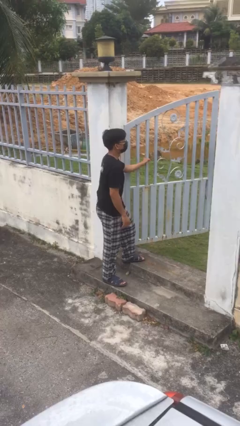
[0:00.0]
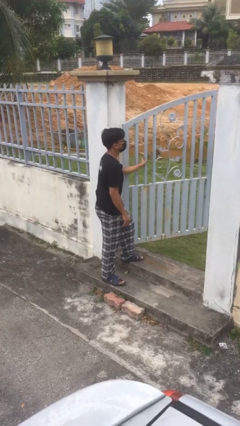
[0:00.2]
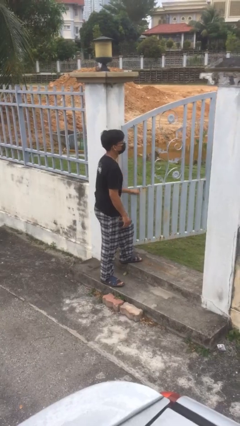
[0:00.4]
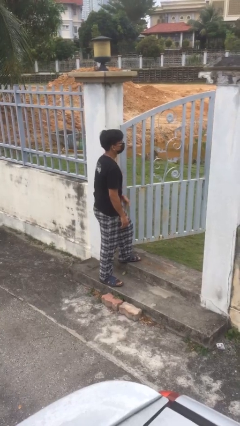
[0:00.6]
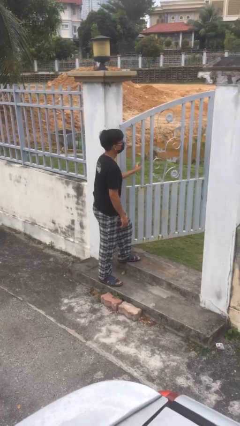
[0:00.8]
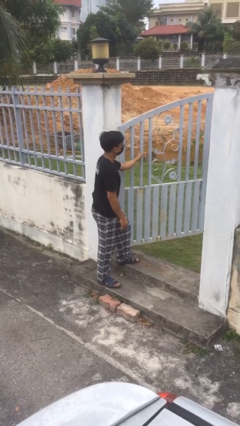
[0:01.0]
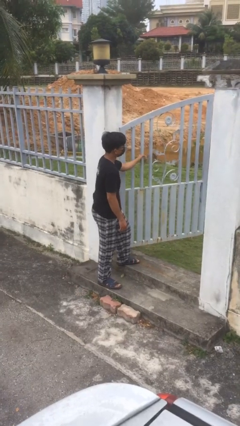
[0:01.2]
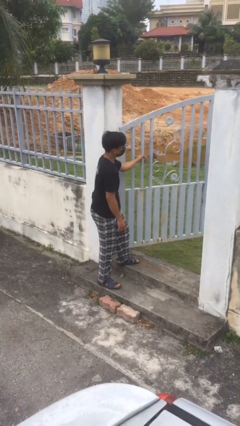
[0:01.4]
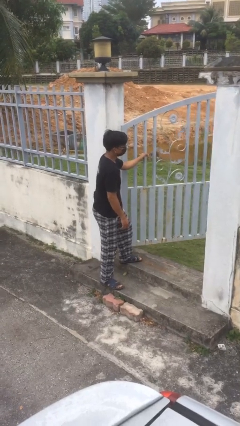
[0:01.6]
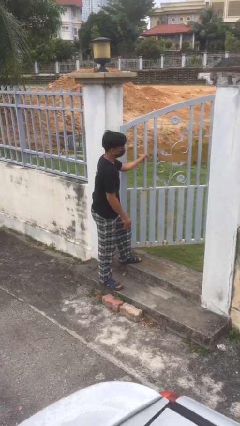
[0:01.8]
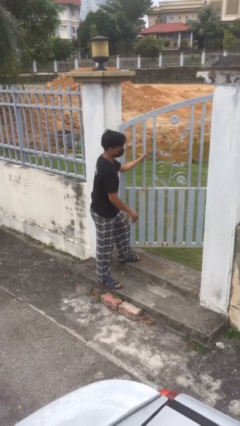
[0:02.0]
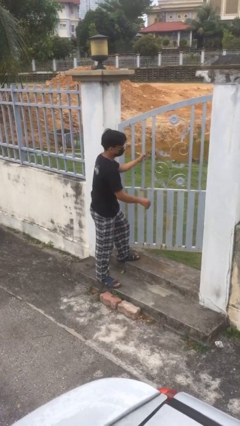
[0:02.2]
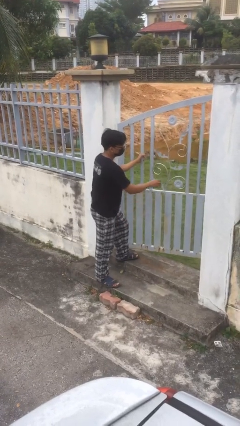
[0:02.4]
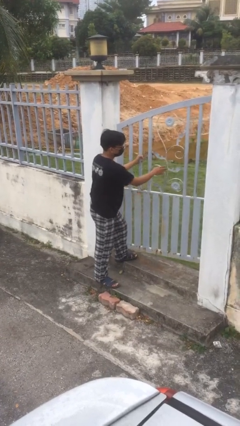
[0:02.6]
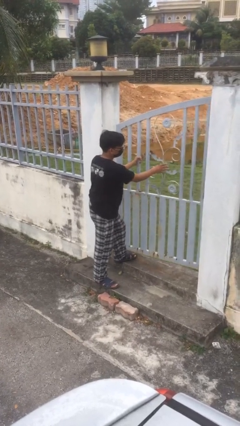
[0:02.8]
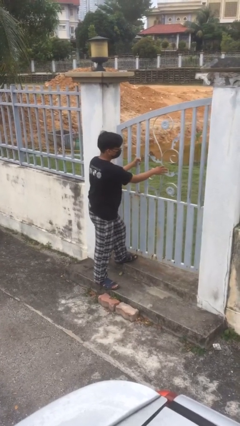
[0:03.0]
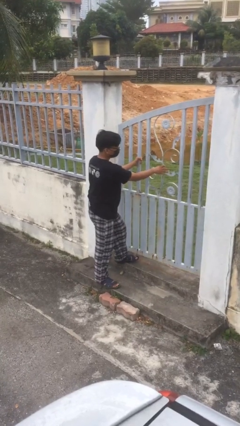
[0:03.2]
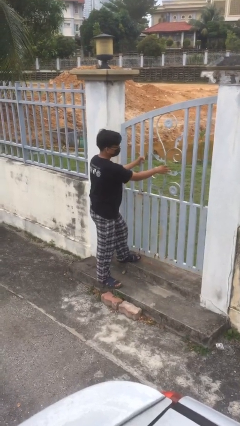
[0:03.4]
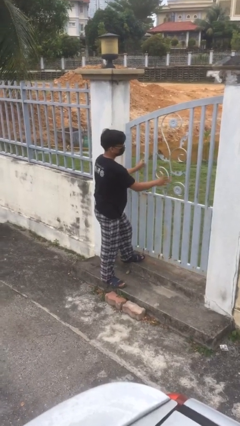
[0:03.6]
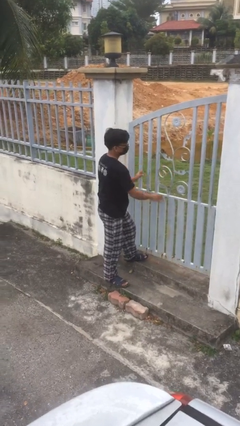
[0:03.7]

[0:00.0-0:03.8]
person closes facility door

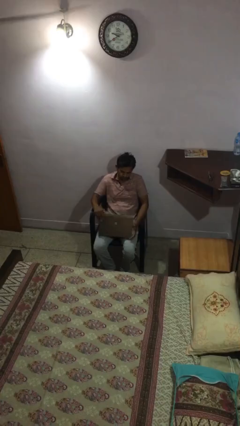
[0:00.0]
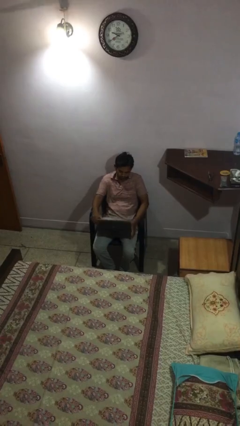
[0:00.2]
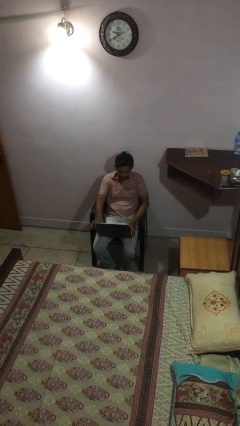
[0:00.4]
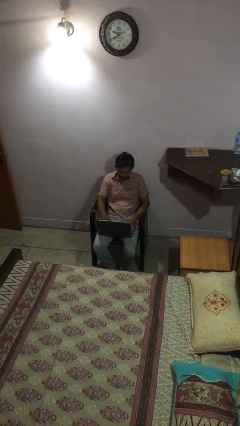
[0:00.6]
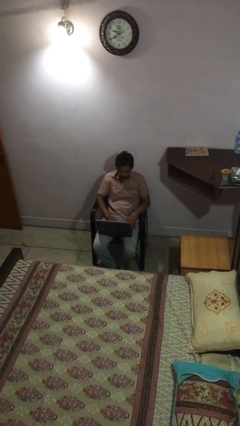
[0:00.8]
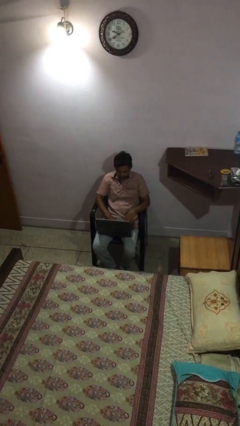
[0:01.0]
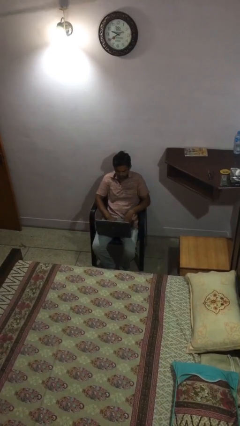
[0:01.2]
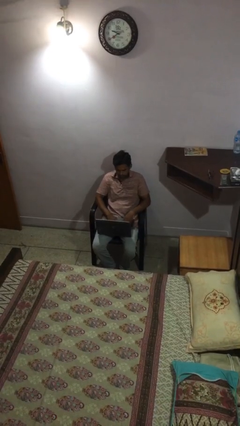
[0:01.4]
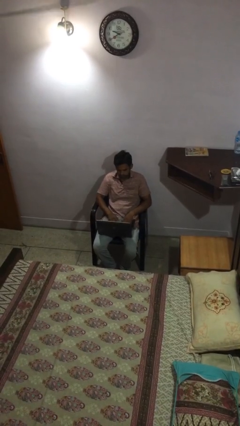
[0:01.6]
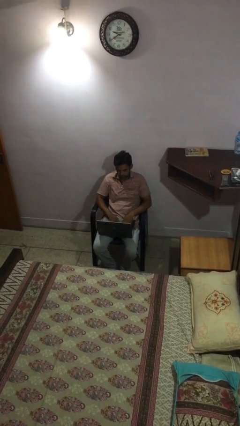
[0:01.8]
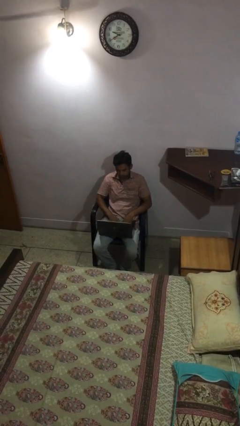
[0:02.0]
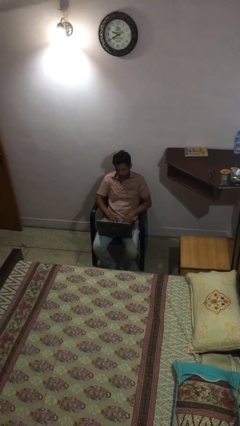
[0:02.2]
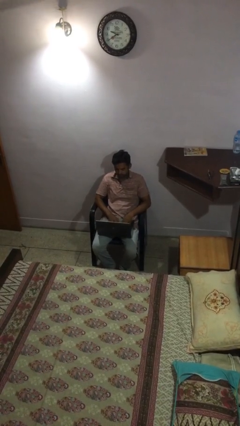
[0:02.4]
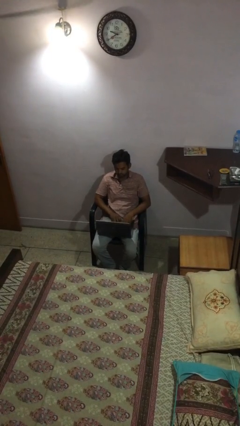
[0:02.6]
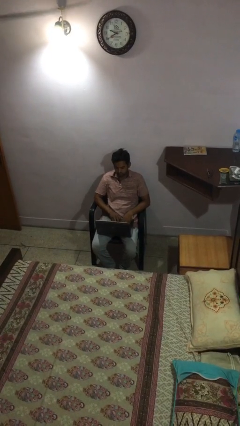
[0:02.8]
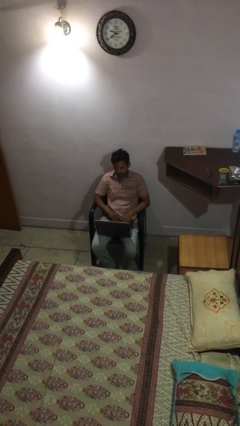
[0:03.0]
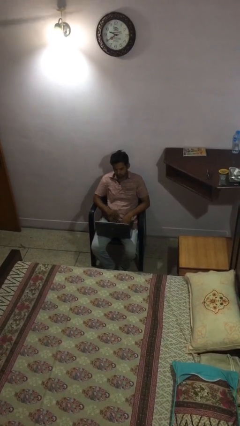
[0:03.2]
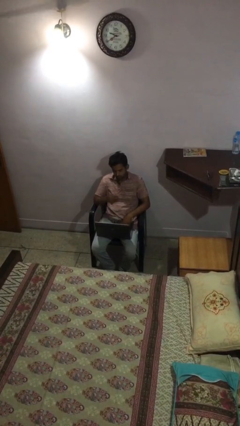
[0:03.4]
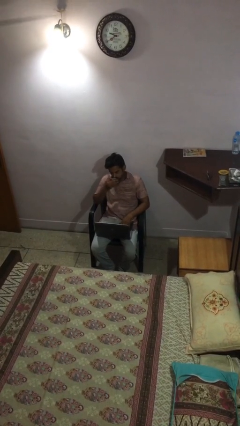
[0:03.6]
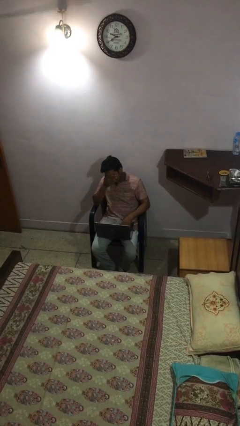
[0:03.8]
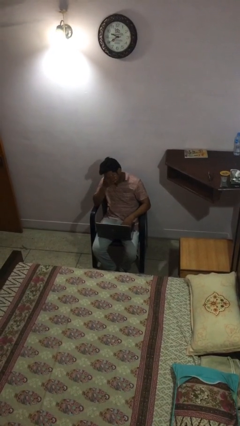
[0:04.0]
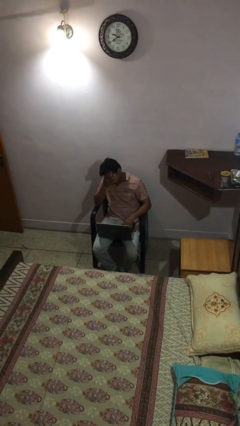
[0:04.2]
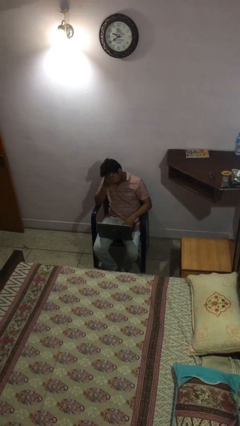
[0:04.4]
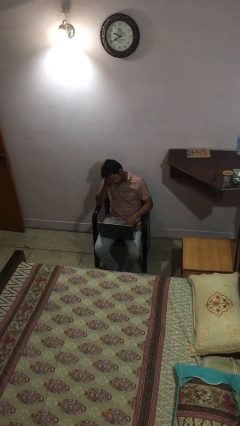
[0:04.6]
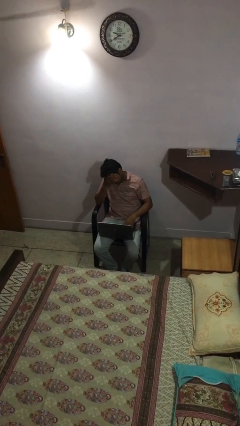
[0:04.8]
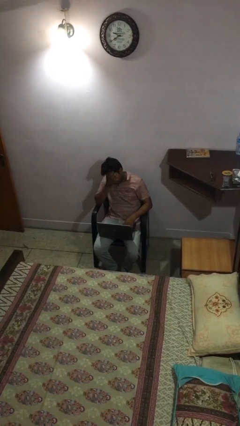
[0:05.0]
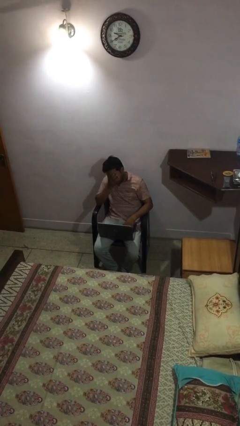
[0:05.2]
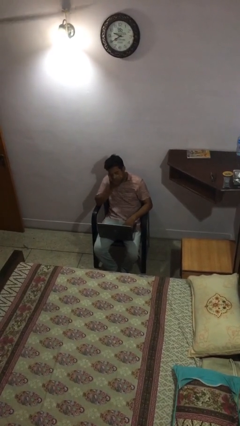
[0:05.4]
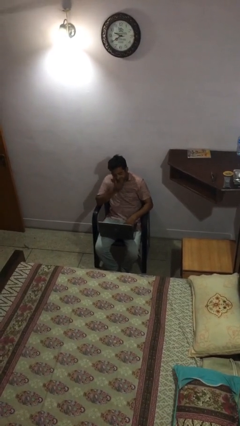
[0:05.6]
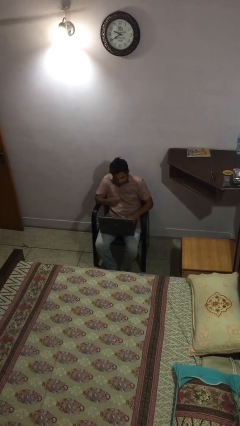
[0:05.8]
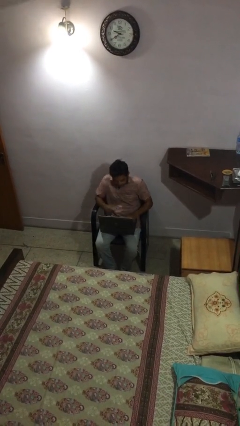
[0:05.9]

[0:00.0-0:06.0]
person interacts with laptop

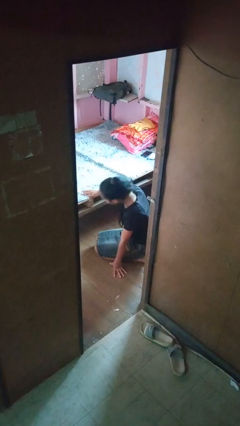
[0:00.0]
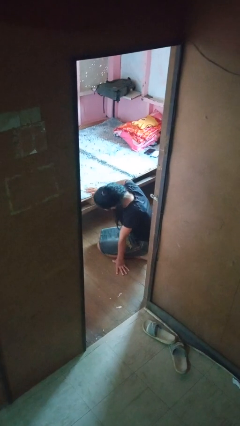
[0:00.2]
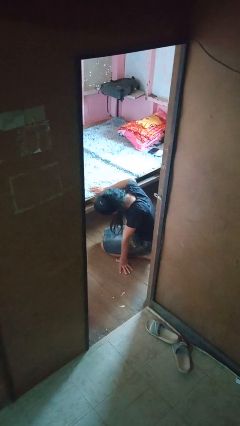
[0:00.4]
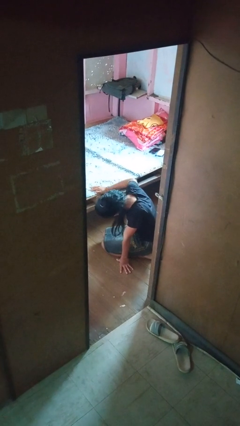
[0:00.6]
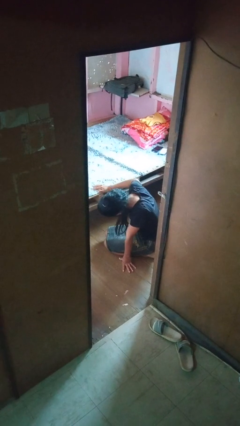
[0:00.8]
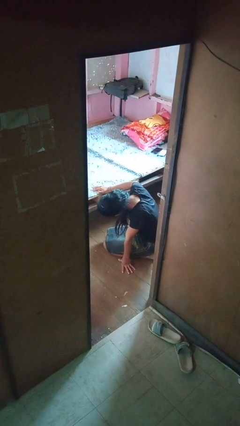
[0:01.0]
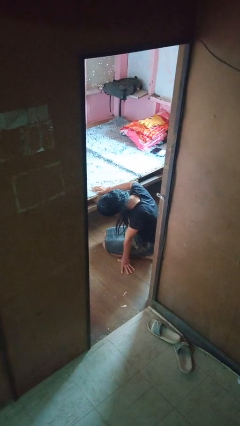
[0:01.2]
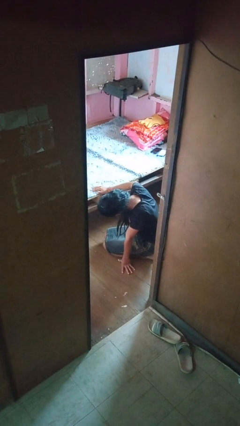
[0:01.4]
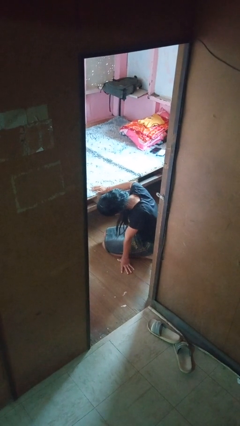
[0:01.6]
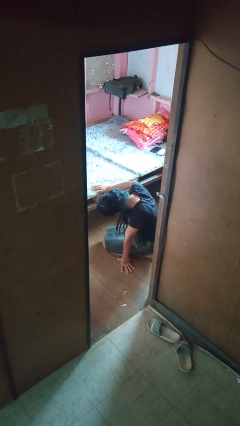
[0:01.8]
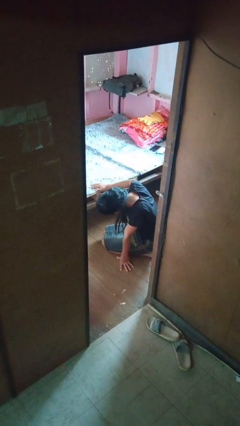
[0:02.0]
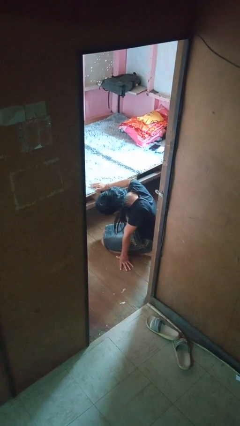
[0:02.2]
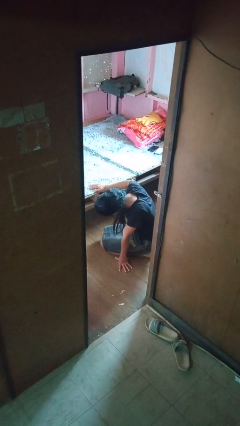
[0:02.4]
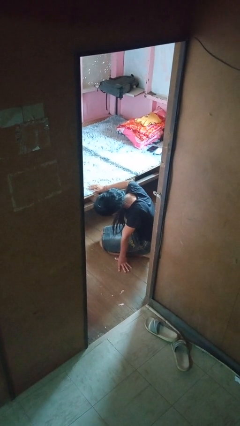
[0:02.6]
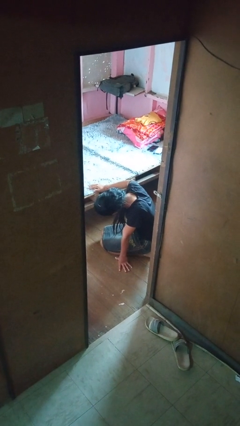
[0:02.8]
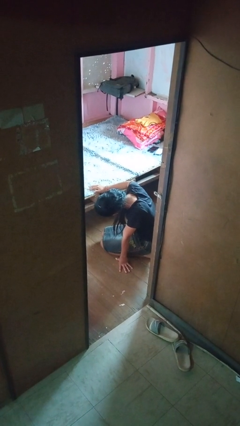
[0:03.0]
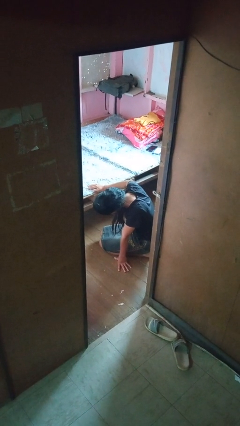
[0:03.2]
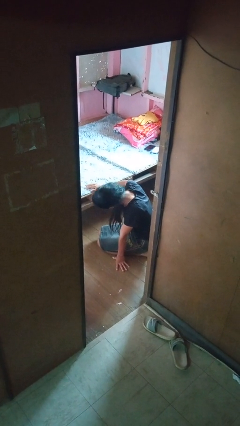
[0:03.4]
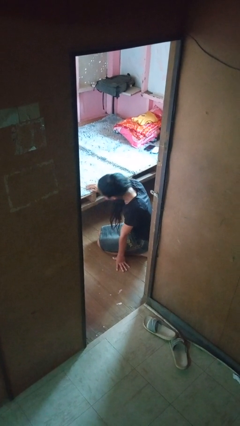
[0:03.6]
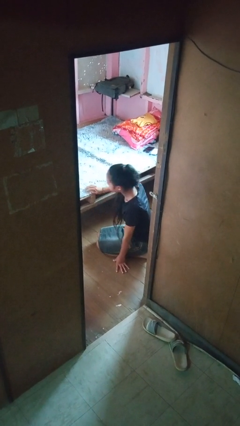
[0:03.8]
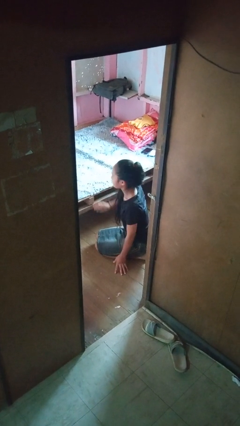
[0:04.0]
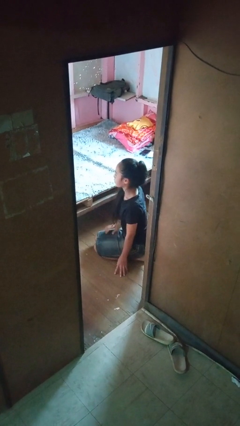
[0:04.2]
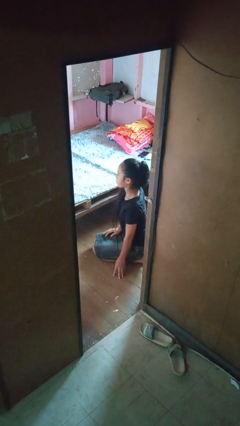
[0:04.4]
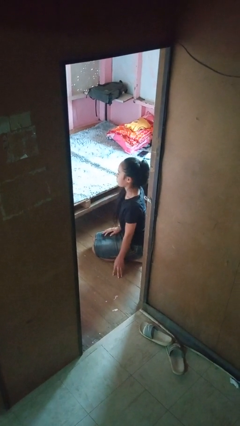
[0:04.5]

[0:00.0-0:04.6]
person searches under bed

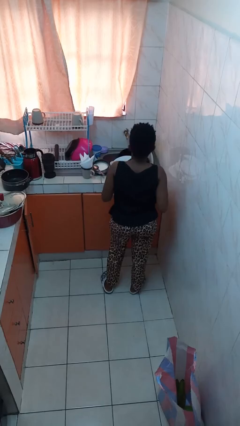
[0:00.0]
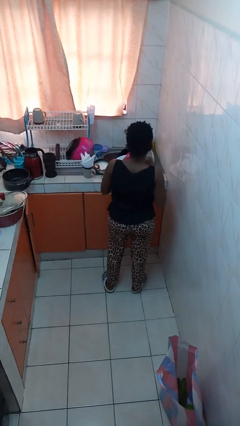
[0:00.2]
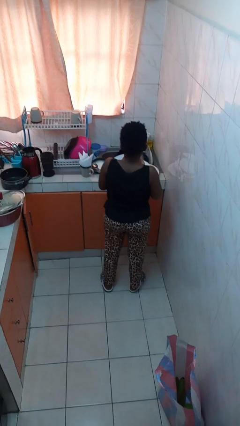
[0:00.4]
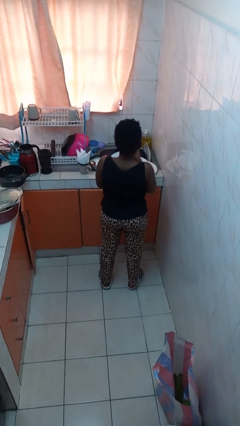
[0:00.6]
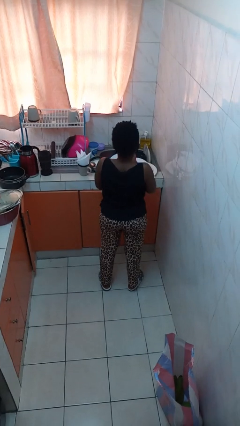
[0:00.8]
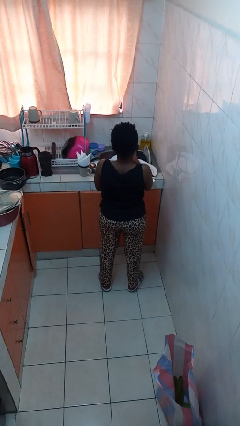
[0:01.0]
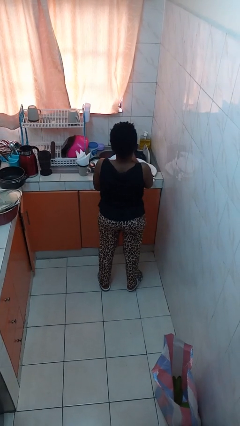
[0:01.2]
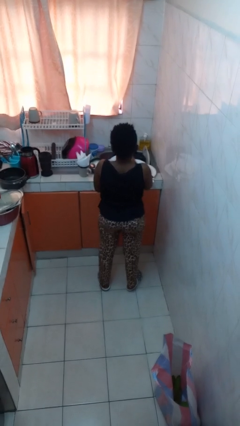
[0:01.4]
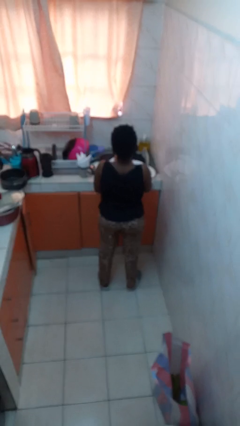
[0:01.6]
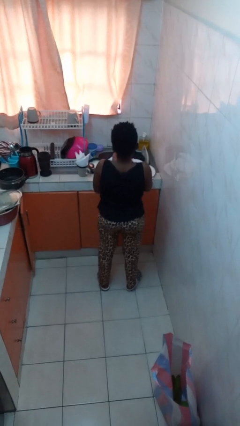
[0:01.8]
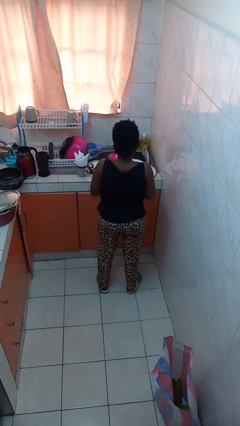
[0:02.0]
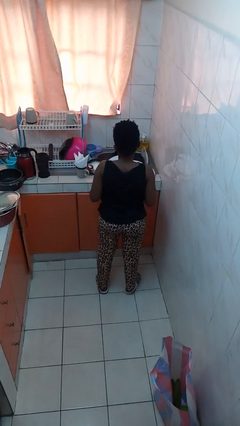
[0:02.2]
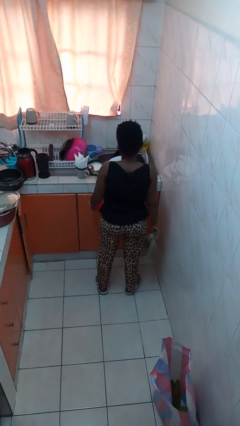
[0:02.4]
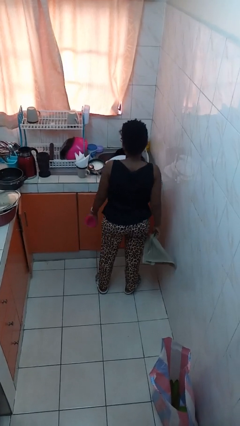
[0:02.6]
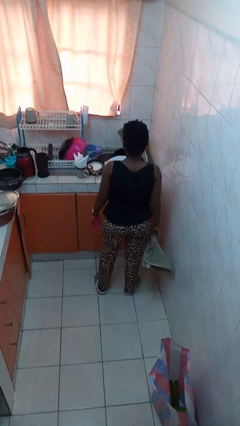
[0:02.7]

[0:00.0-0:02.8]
person dries dish
